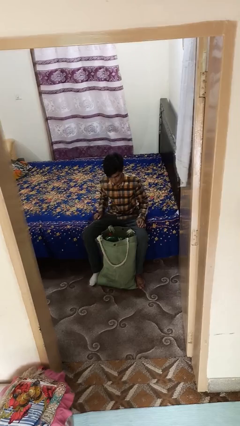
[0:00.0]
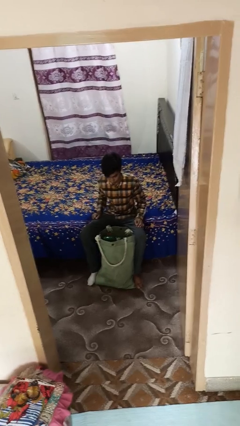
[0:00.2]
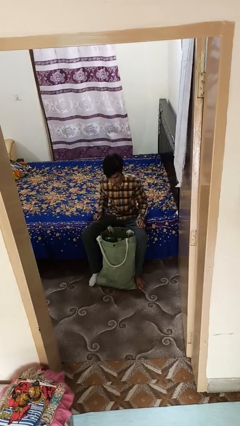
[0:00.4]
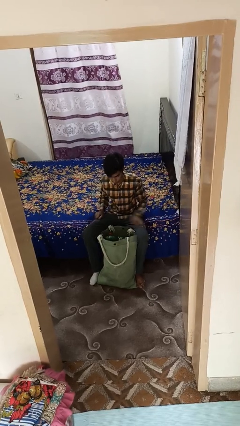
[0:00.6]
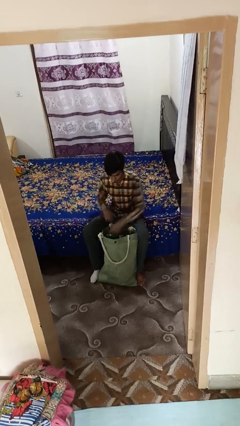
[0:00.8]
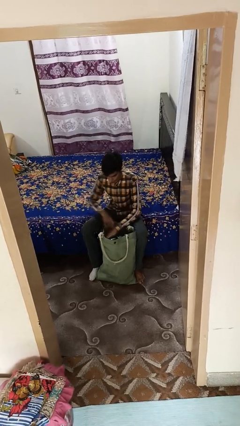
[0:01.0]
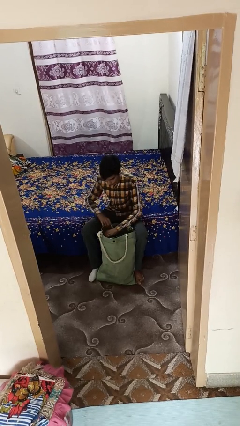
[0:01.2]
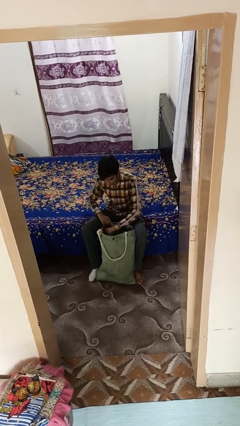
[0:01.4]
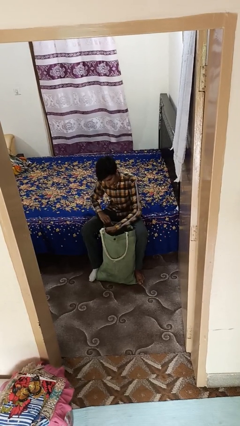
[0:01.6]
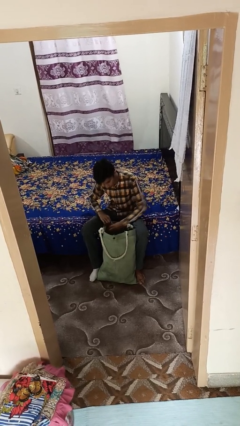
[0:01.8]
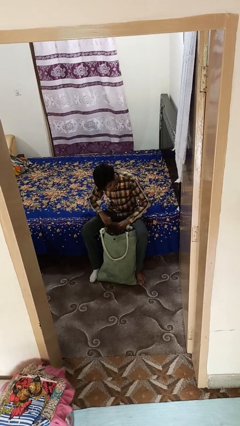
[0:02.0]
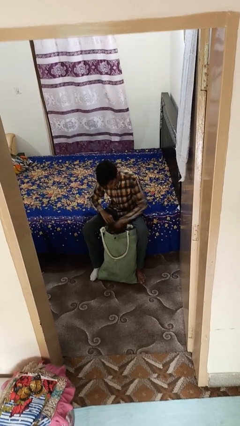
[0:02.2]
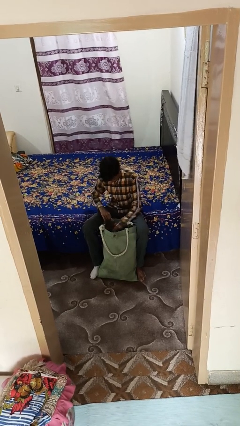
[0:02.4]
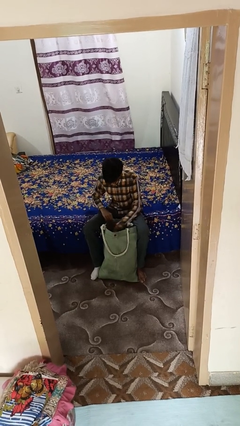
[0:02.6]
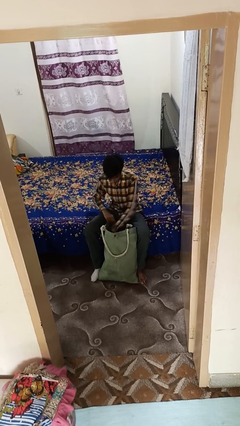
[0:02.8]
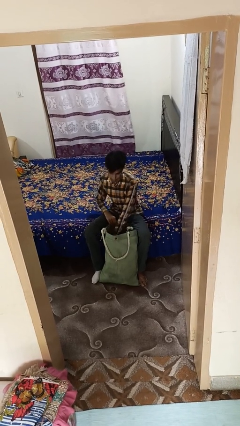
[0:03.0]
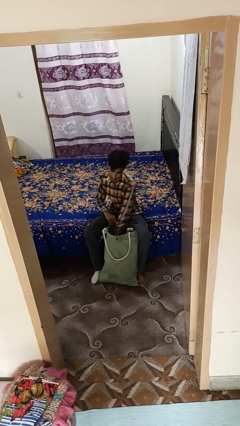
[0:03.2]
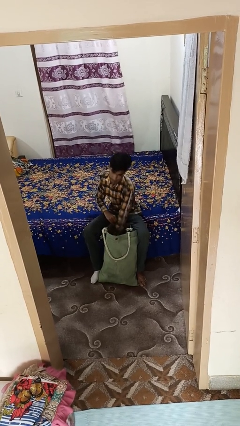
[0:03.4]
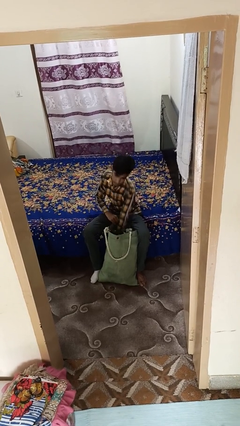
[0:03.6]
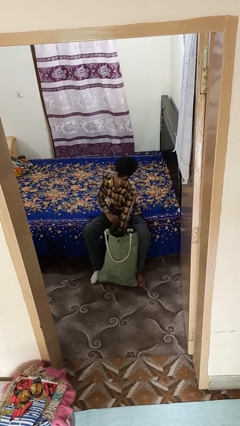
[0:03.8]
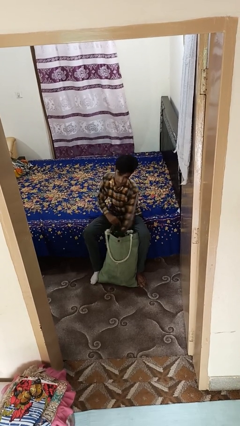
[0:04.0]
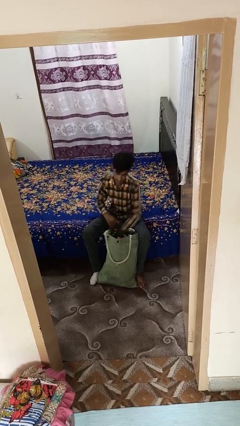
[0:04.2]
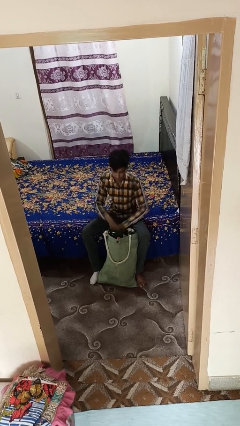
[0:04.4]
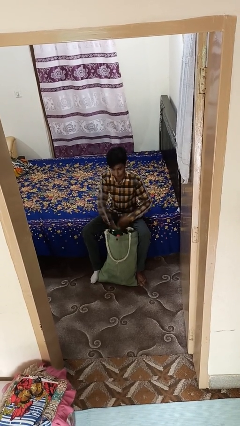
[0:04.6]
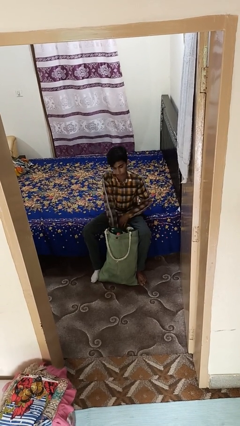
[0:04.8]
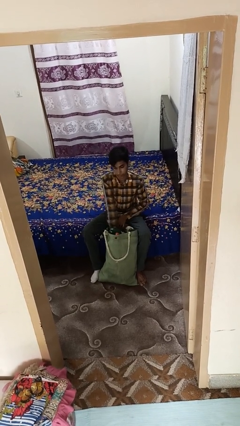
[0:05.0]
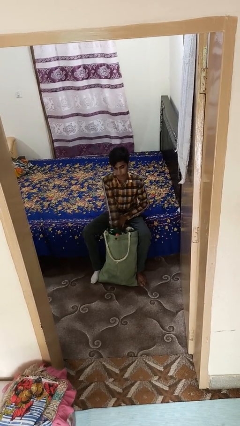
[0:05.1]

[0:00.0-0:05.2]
person searches in bag

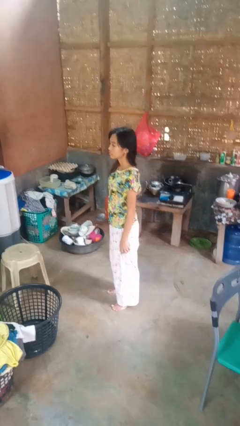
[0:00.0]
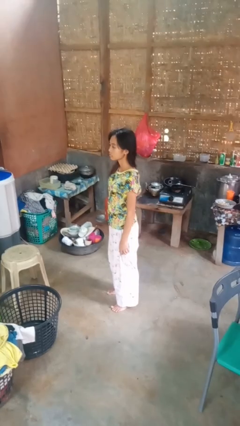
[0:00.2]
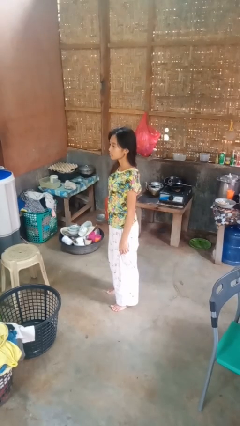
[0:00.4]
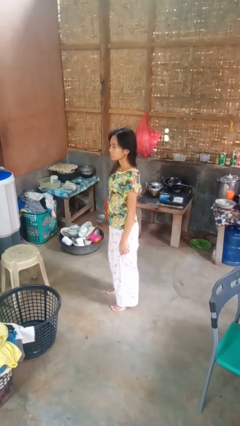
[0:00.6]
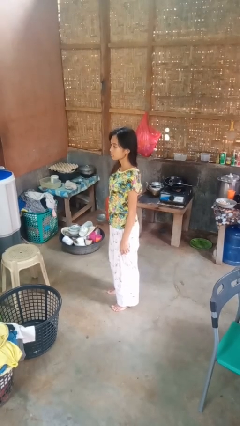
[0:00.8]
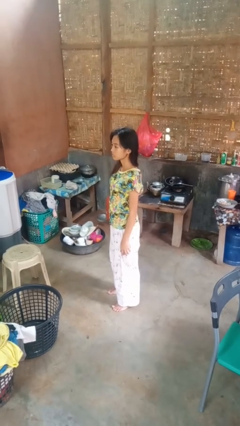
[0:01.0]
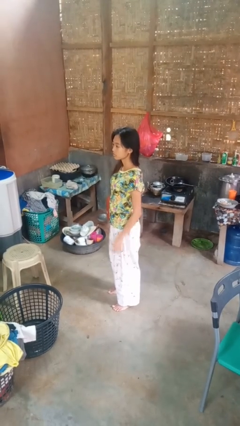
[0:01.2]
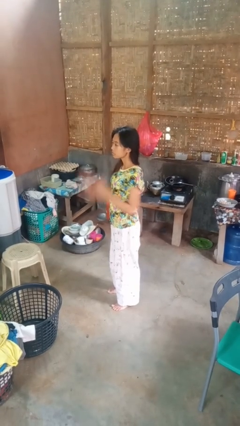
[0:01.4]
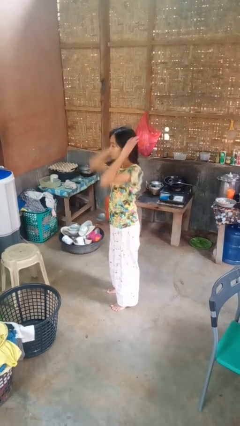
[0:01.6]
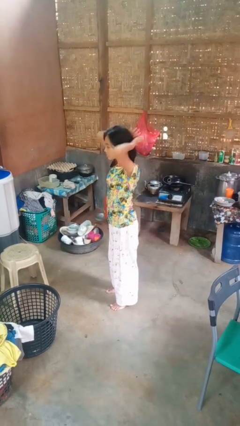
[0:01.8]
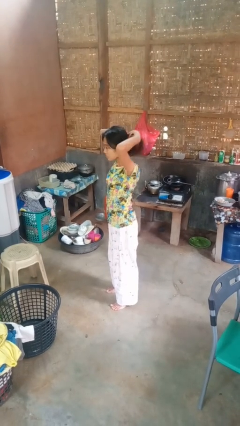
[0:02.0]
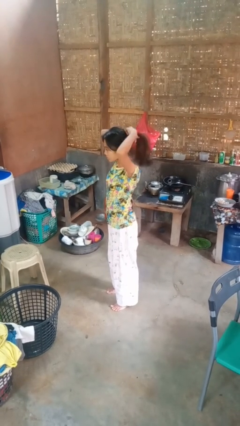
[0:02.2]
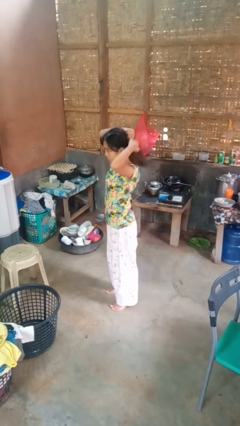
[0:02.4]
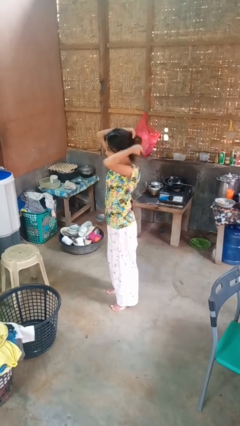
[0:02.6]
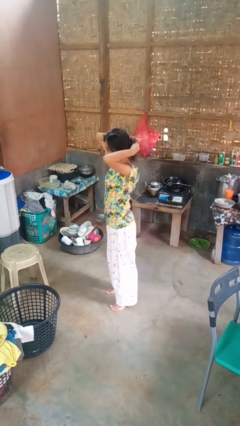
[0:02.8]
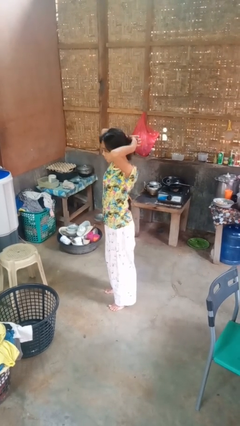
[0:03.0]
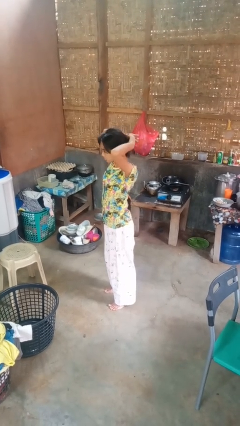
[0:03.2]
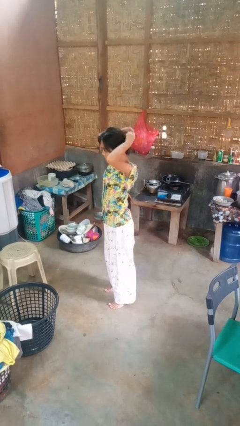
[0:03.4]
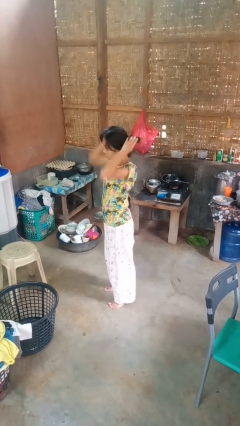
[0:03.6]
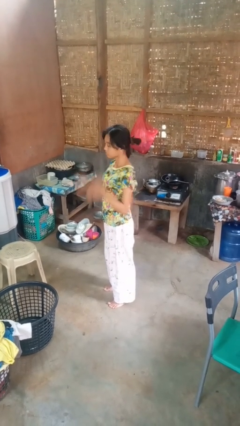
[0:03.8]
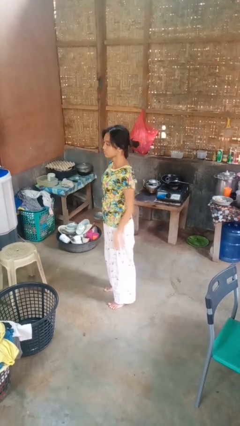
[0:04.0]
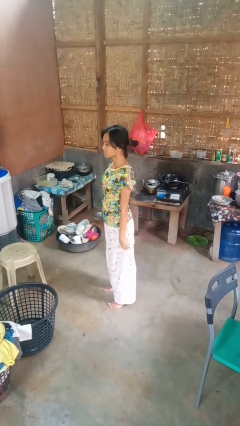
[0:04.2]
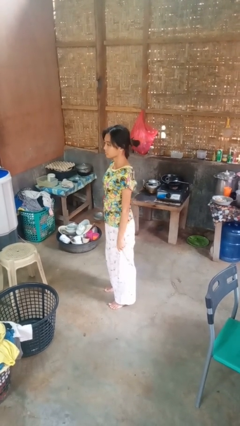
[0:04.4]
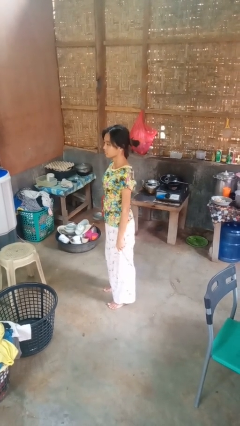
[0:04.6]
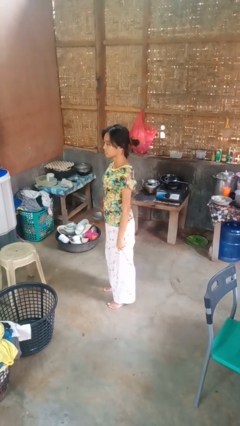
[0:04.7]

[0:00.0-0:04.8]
person puts hair in ponytail

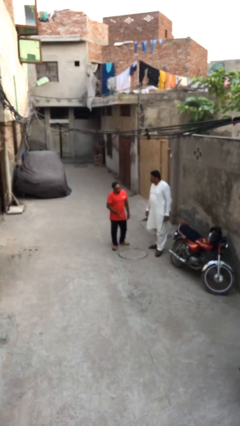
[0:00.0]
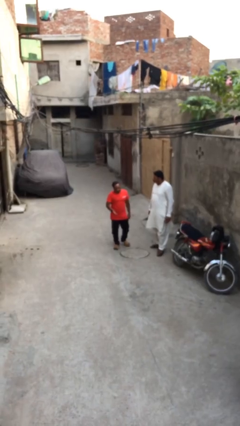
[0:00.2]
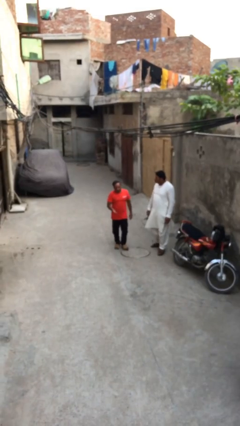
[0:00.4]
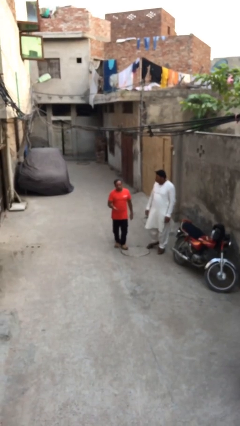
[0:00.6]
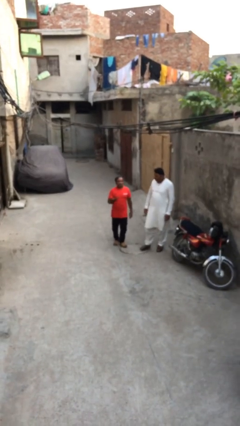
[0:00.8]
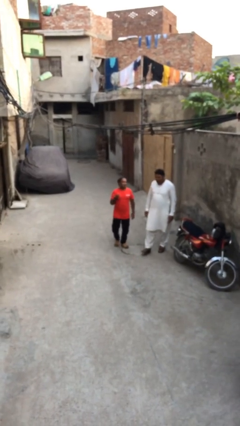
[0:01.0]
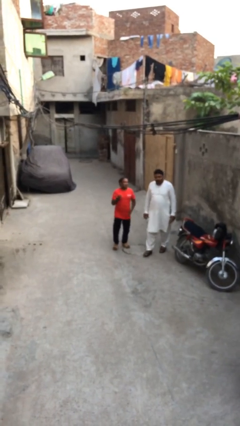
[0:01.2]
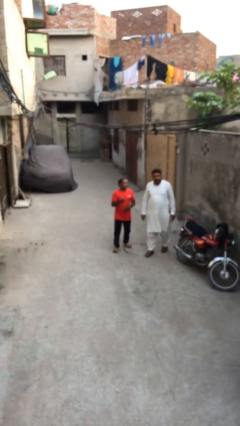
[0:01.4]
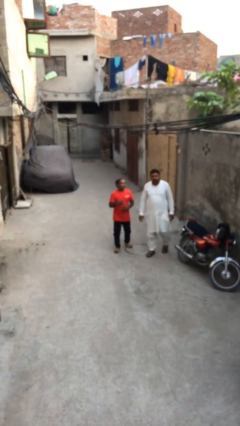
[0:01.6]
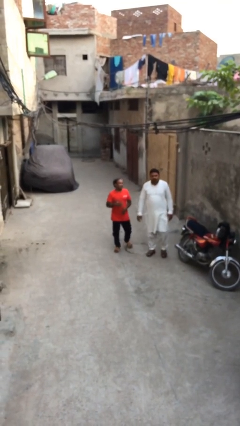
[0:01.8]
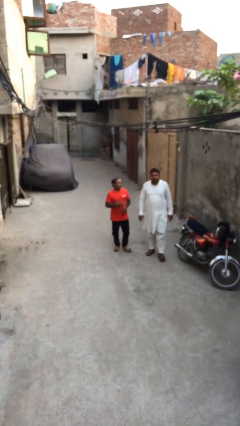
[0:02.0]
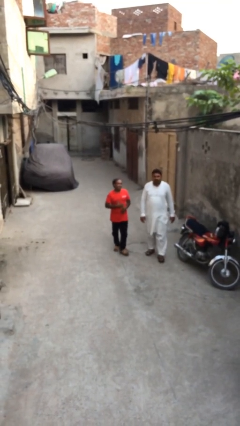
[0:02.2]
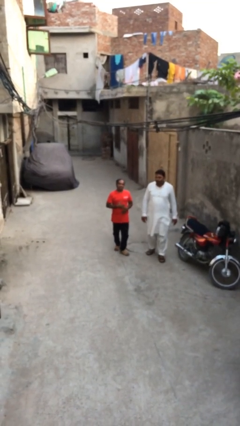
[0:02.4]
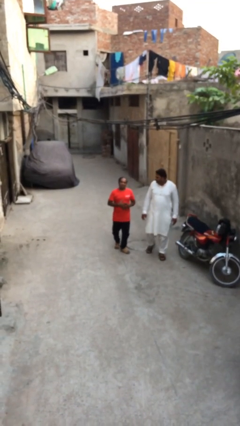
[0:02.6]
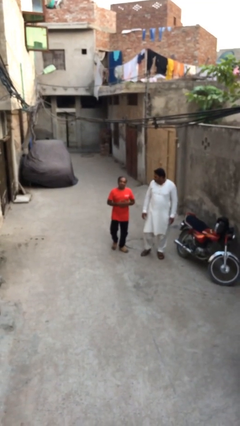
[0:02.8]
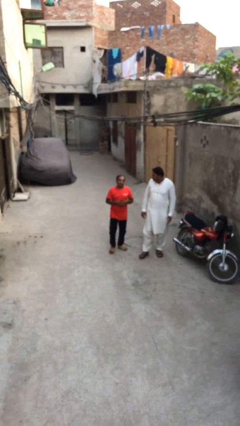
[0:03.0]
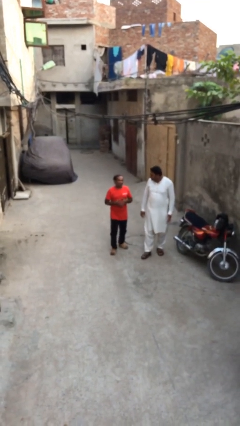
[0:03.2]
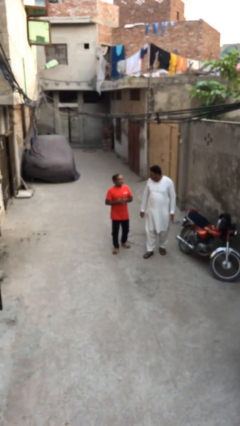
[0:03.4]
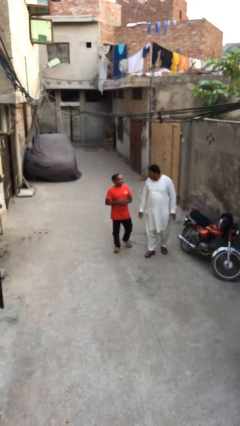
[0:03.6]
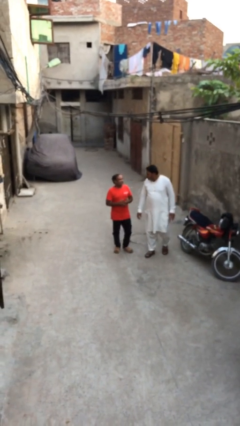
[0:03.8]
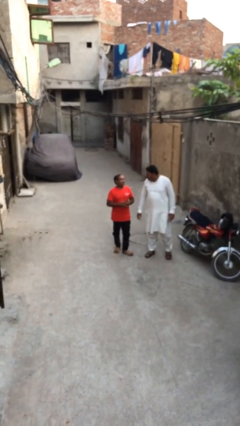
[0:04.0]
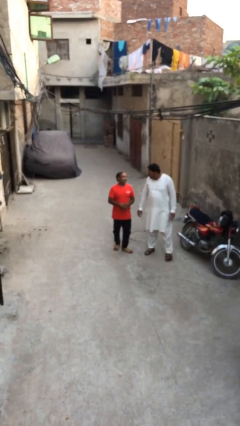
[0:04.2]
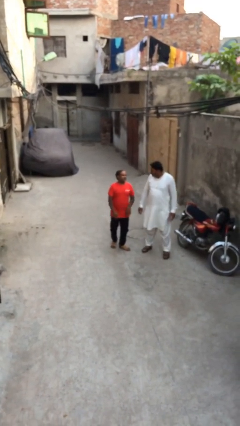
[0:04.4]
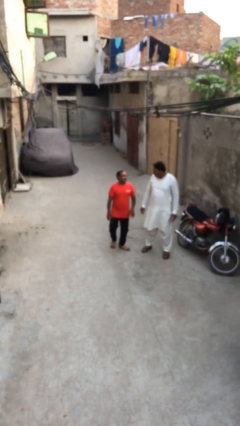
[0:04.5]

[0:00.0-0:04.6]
person talks to person

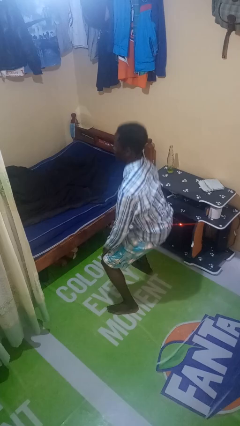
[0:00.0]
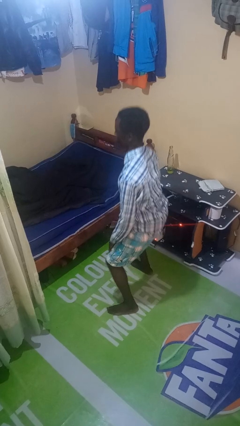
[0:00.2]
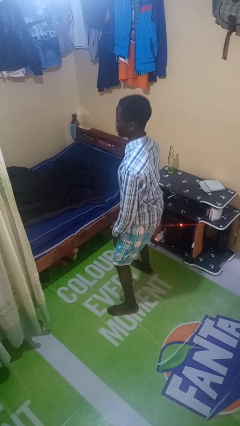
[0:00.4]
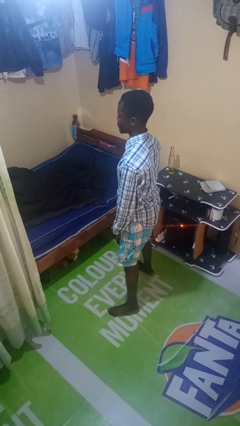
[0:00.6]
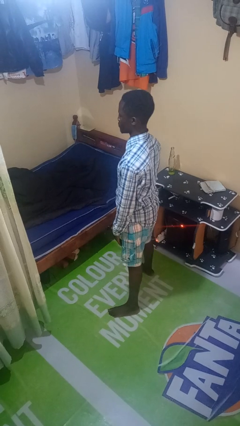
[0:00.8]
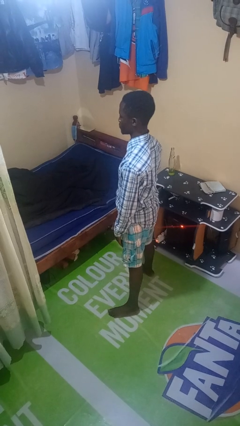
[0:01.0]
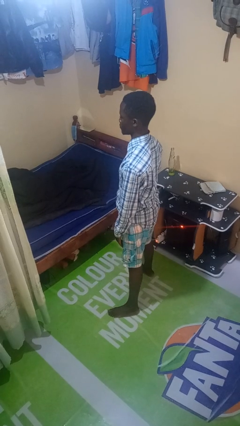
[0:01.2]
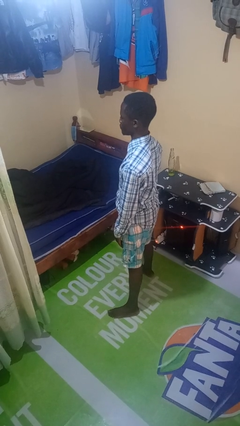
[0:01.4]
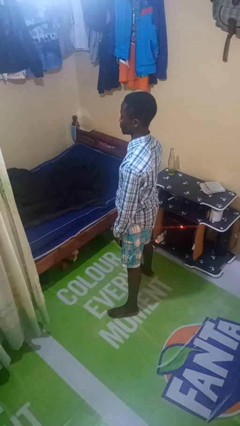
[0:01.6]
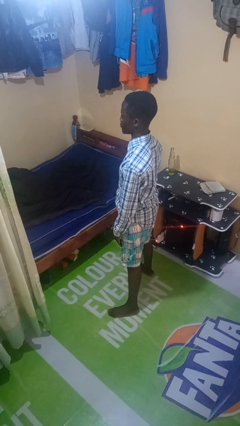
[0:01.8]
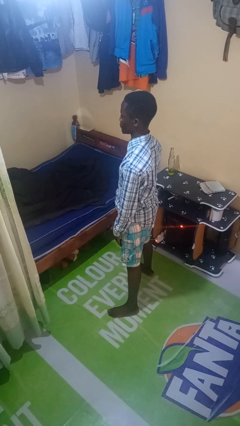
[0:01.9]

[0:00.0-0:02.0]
person stands up

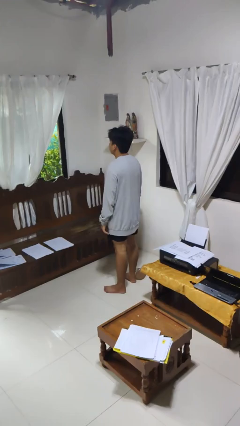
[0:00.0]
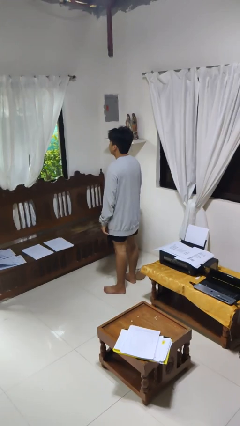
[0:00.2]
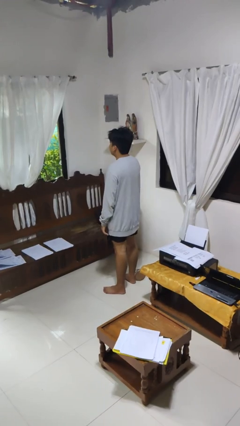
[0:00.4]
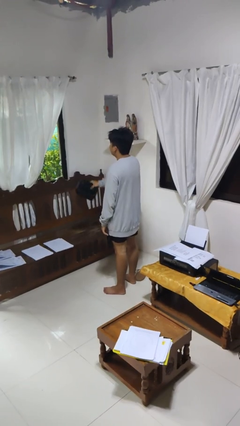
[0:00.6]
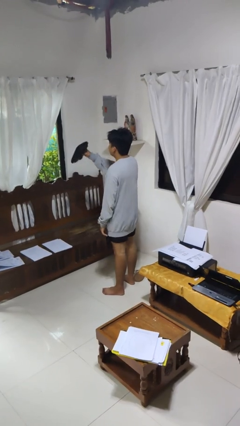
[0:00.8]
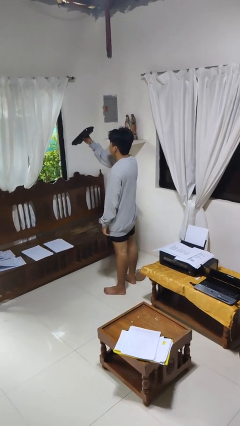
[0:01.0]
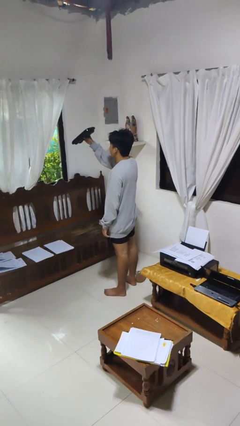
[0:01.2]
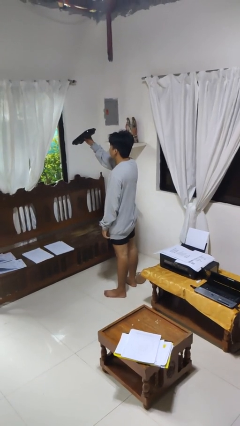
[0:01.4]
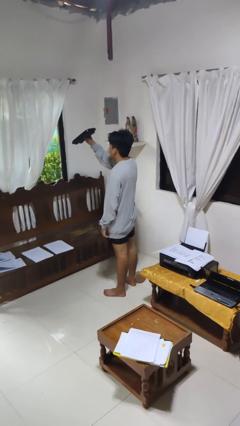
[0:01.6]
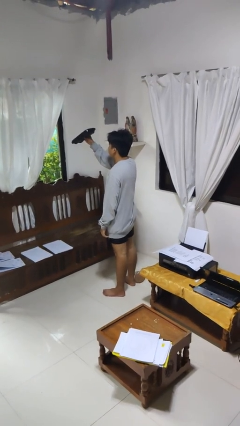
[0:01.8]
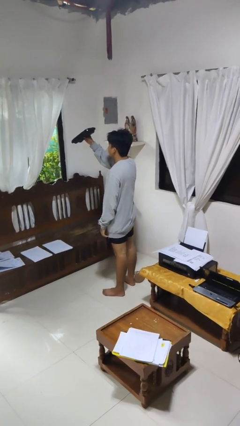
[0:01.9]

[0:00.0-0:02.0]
person holds object above head
